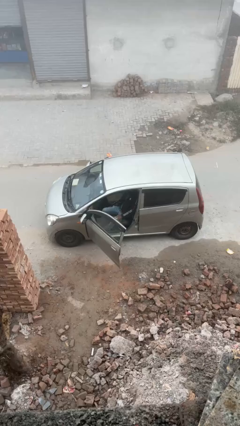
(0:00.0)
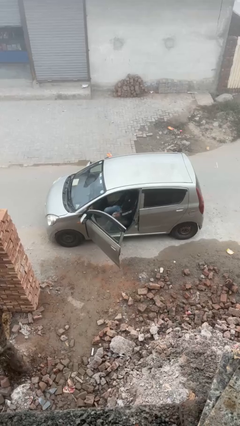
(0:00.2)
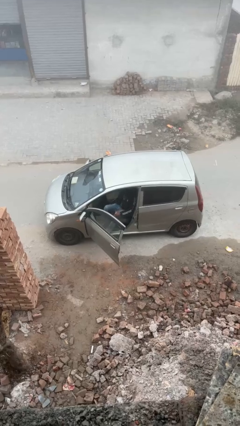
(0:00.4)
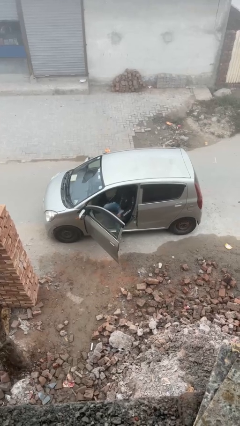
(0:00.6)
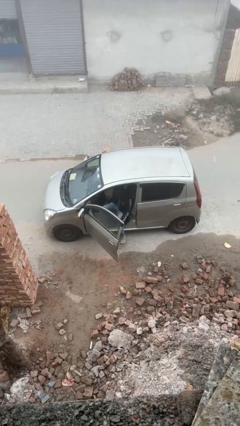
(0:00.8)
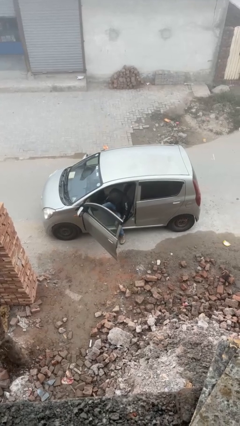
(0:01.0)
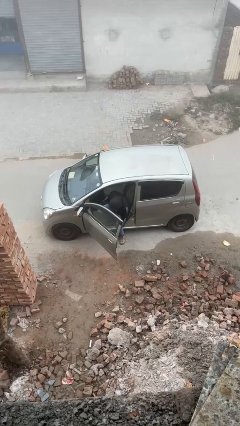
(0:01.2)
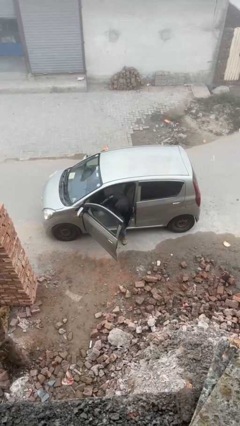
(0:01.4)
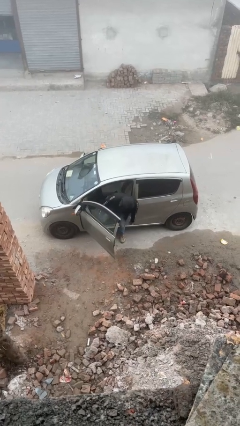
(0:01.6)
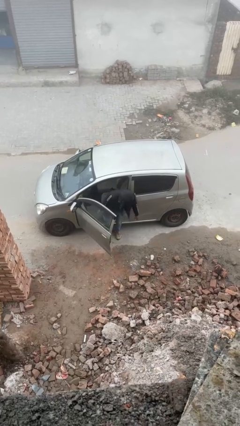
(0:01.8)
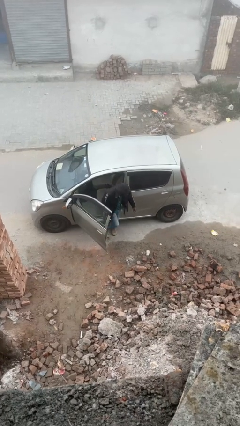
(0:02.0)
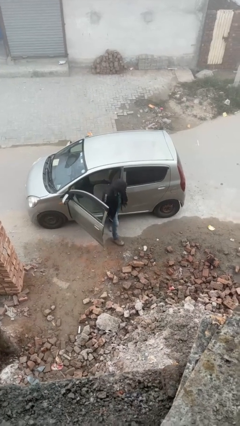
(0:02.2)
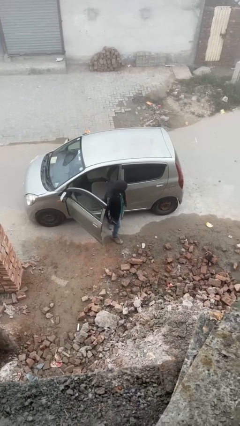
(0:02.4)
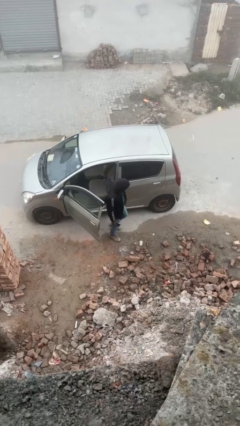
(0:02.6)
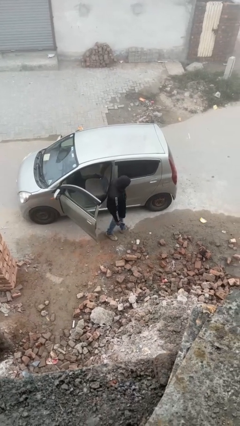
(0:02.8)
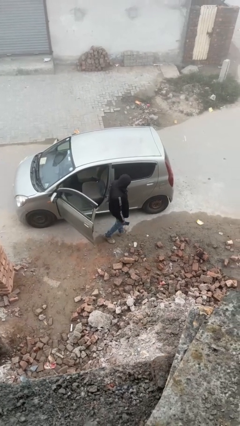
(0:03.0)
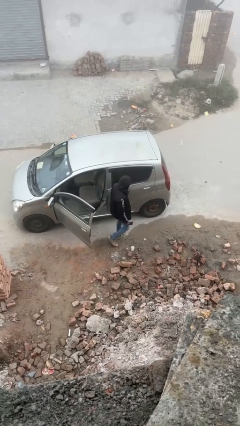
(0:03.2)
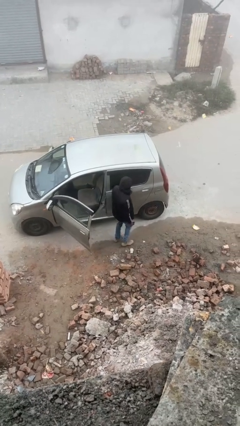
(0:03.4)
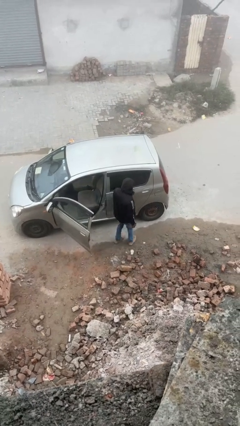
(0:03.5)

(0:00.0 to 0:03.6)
person exits car

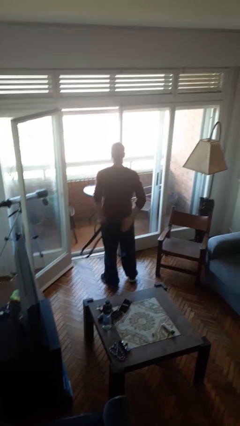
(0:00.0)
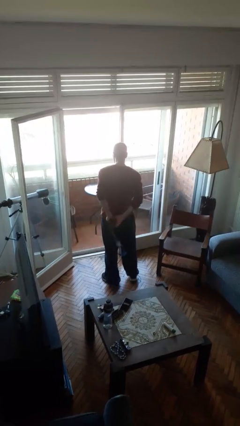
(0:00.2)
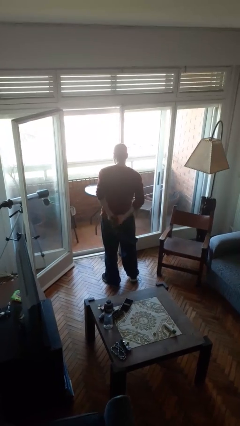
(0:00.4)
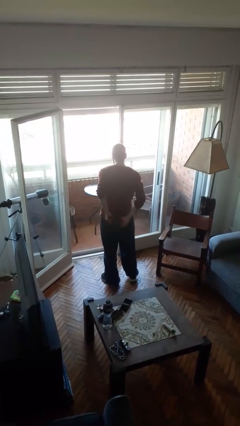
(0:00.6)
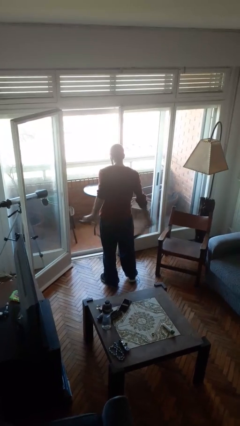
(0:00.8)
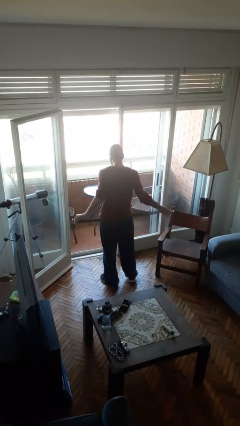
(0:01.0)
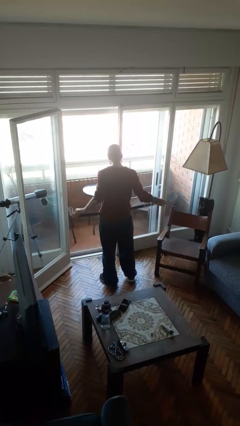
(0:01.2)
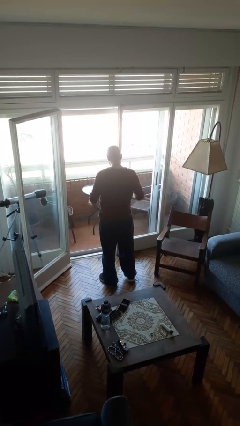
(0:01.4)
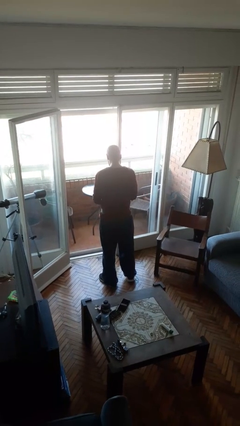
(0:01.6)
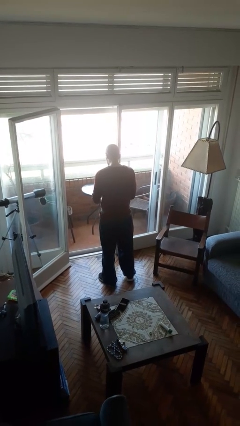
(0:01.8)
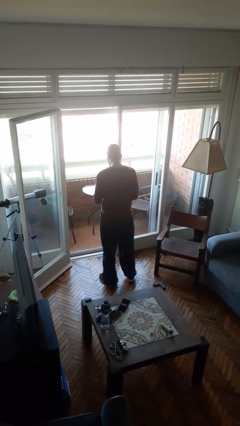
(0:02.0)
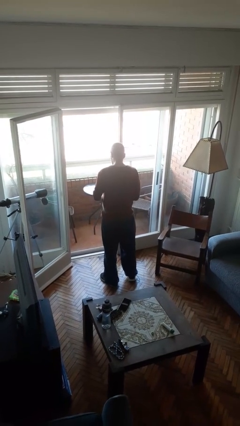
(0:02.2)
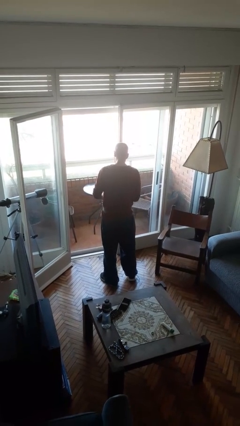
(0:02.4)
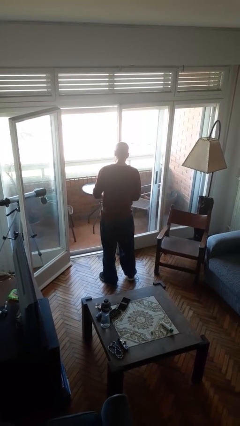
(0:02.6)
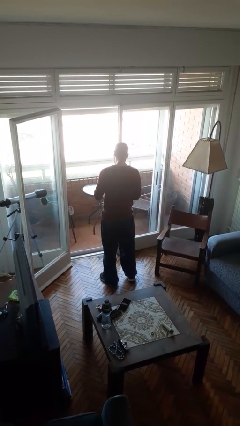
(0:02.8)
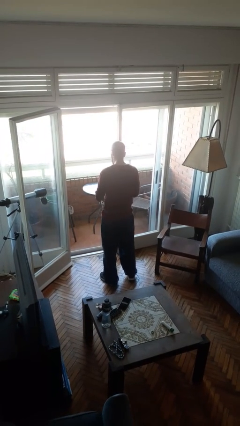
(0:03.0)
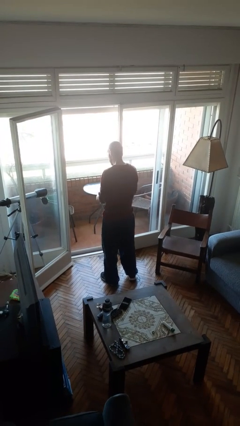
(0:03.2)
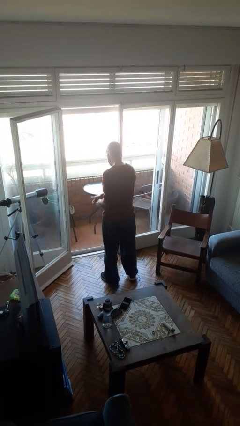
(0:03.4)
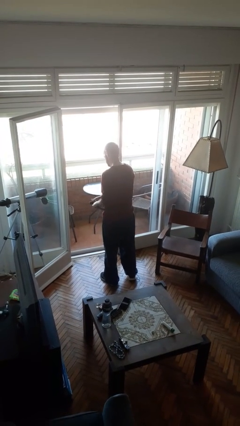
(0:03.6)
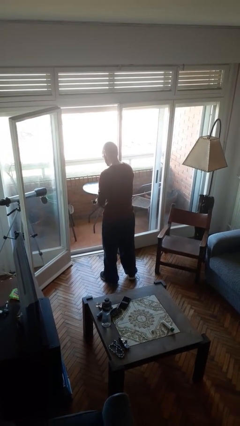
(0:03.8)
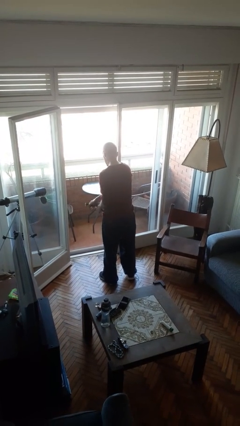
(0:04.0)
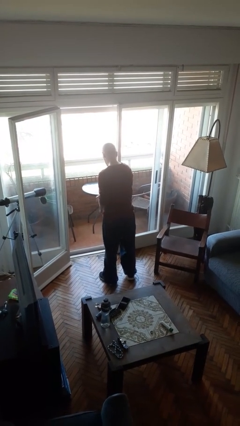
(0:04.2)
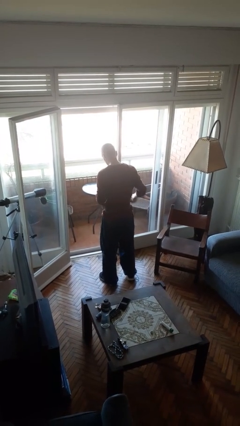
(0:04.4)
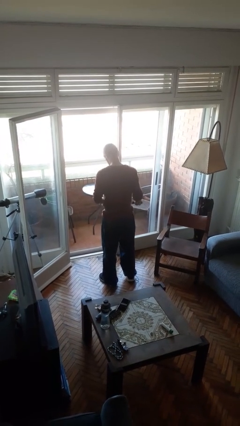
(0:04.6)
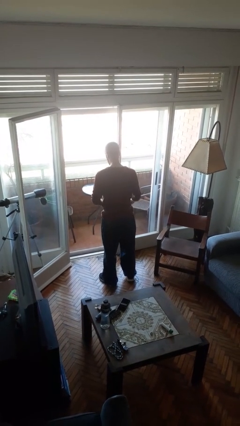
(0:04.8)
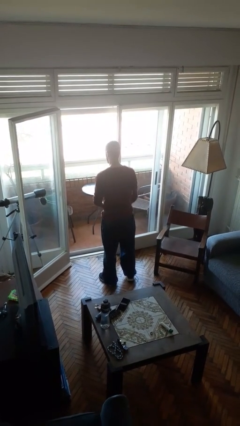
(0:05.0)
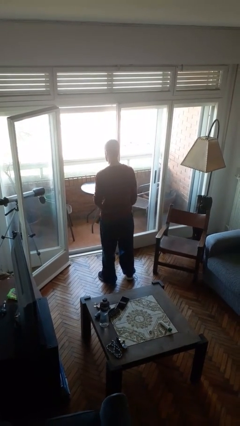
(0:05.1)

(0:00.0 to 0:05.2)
person puts on belt

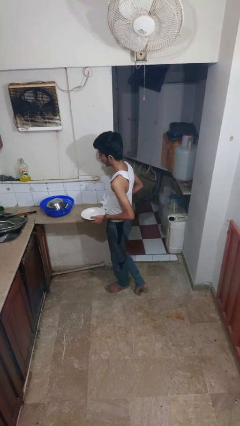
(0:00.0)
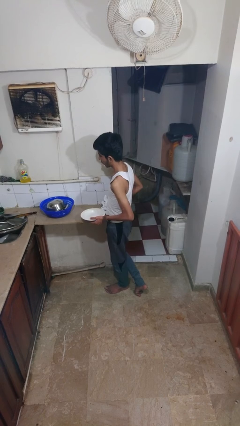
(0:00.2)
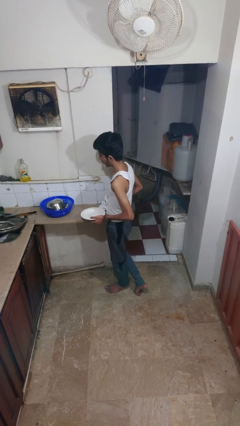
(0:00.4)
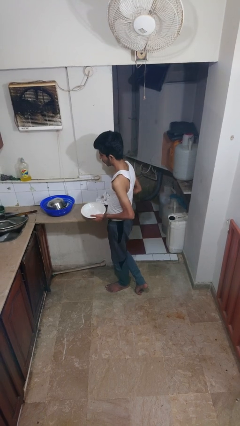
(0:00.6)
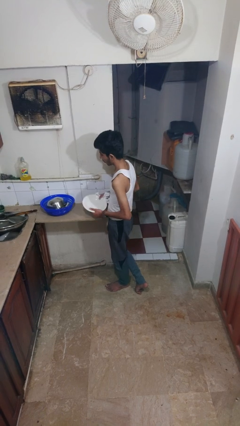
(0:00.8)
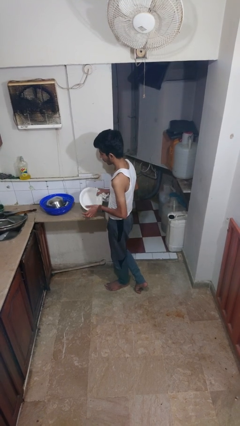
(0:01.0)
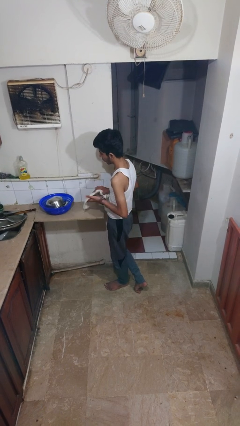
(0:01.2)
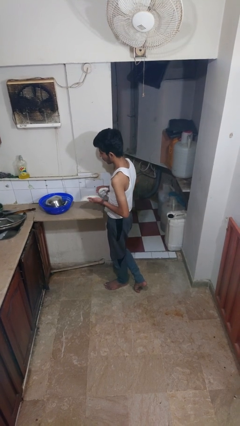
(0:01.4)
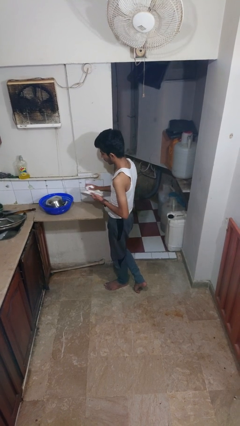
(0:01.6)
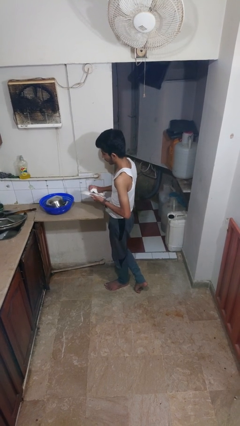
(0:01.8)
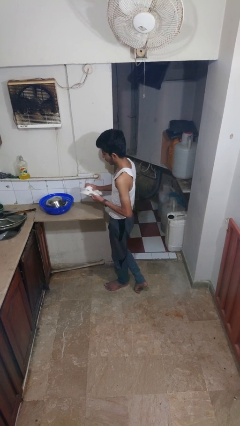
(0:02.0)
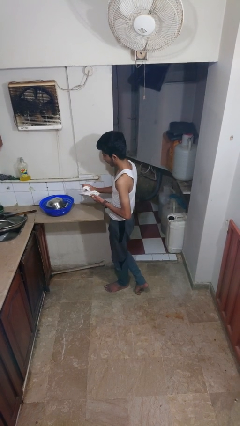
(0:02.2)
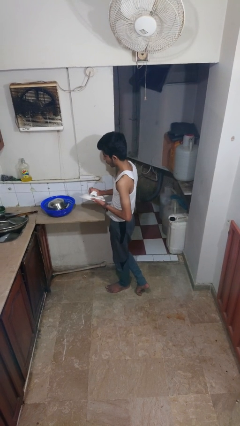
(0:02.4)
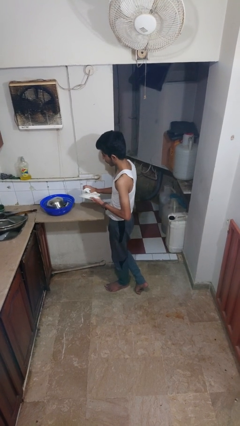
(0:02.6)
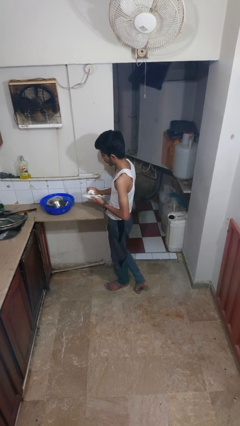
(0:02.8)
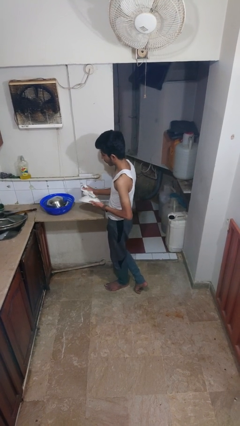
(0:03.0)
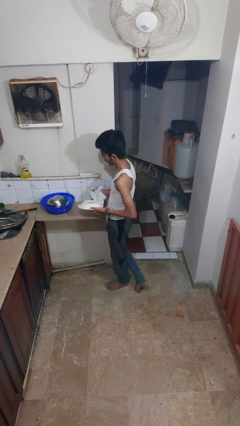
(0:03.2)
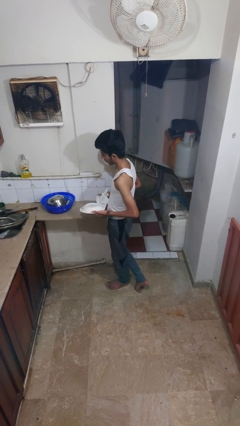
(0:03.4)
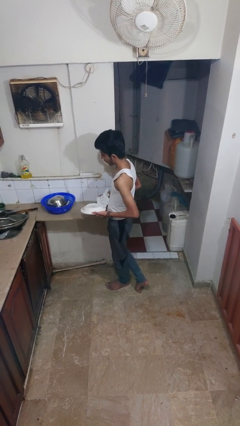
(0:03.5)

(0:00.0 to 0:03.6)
person dries dish

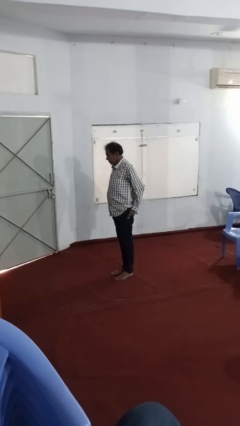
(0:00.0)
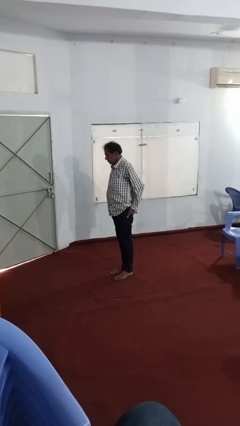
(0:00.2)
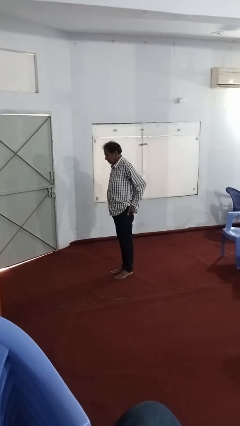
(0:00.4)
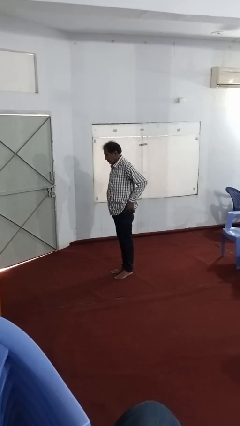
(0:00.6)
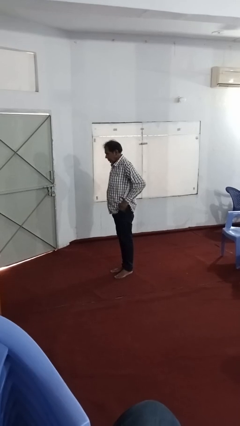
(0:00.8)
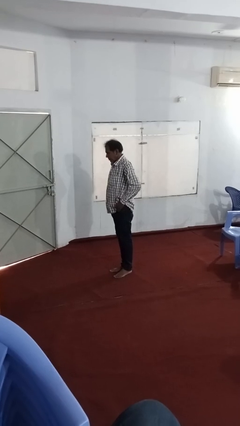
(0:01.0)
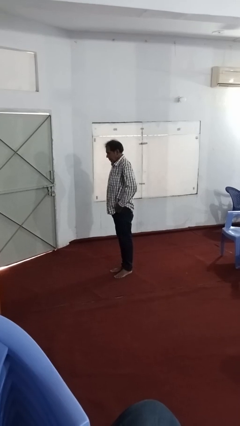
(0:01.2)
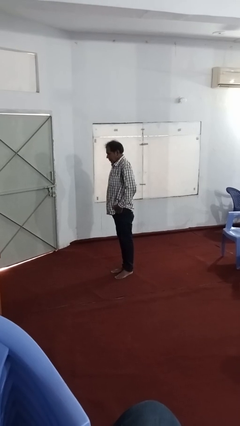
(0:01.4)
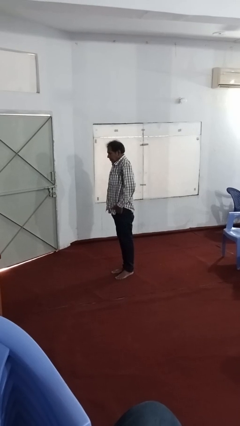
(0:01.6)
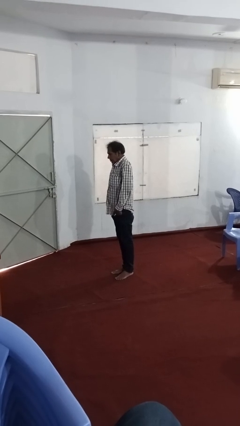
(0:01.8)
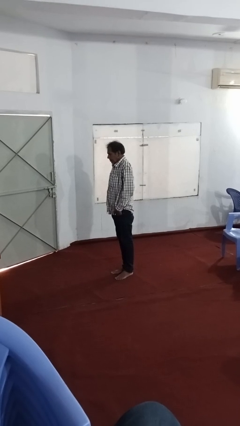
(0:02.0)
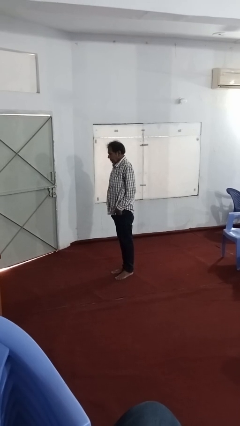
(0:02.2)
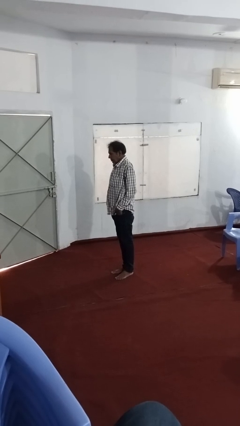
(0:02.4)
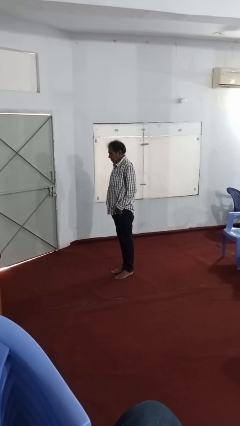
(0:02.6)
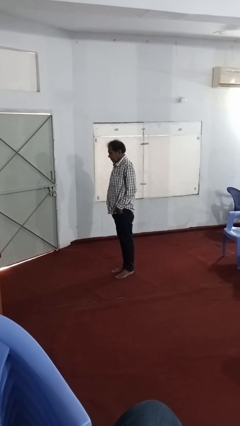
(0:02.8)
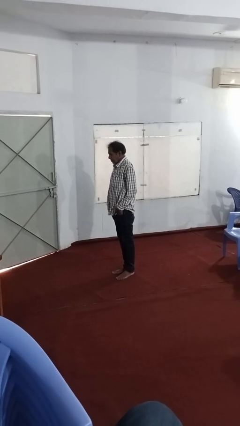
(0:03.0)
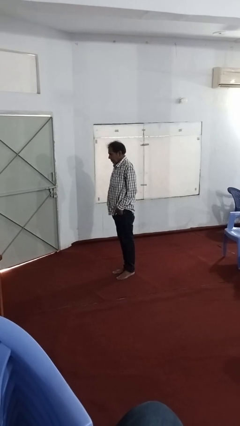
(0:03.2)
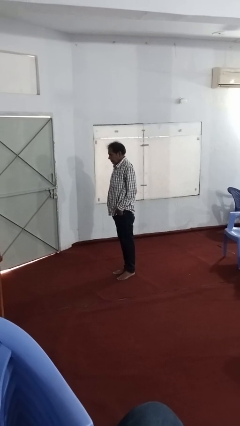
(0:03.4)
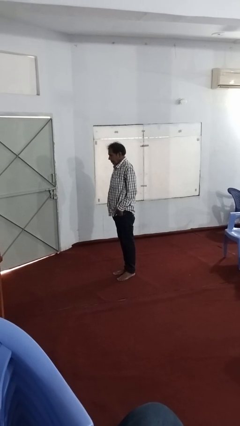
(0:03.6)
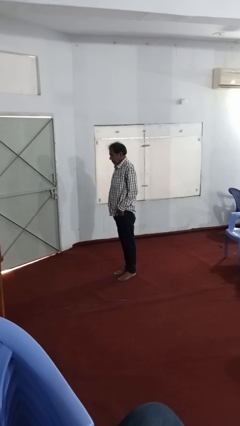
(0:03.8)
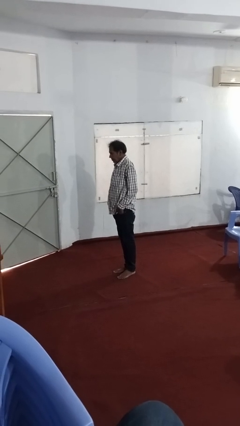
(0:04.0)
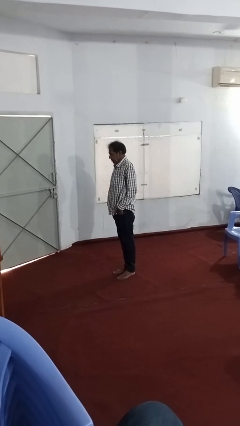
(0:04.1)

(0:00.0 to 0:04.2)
person puts hands in back pockets

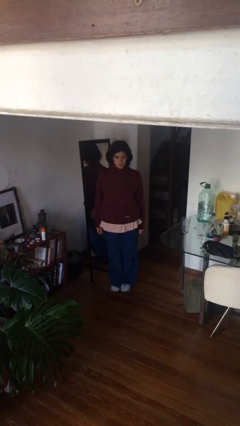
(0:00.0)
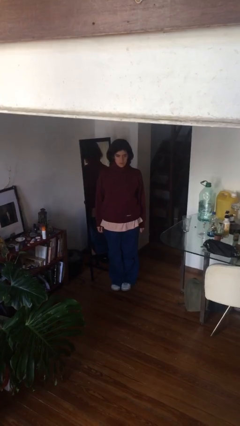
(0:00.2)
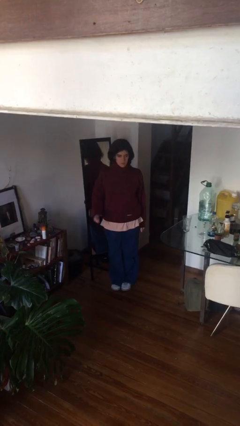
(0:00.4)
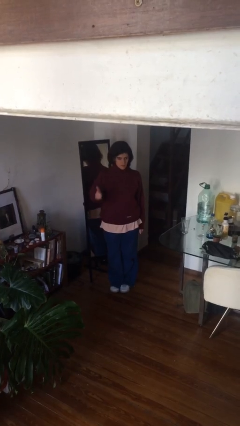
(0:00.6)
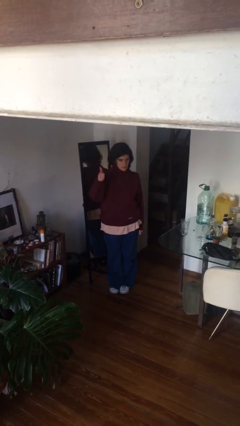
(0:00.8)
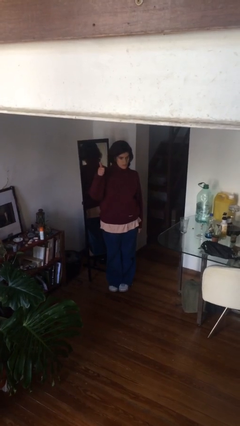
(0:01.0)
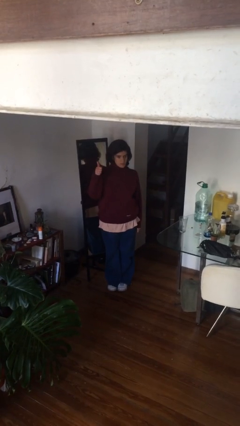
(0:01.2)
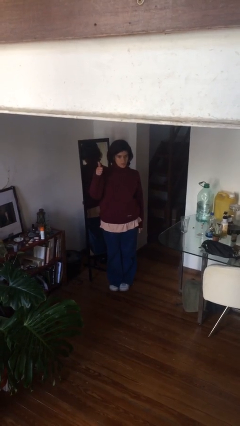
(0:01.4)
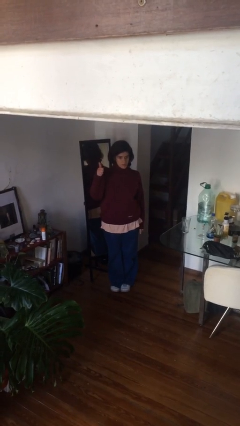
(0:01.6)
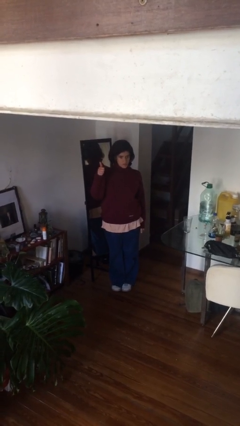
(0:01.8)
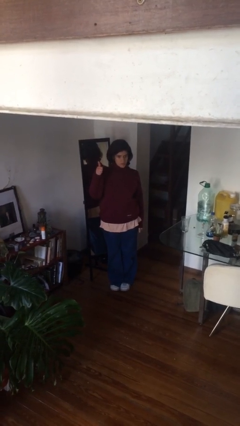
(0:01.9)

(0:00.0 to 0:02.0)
person gestures thumbs up
